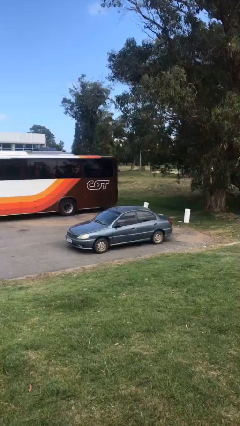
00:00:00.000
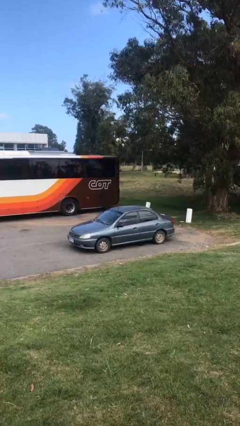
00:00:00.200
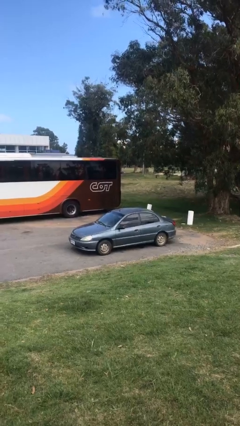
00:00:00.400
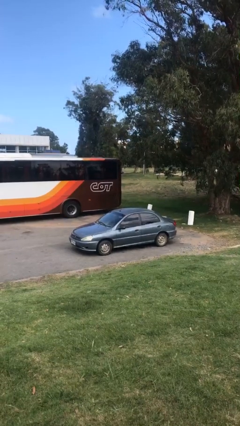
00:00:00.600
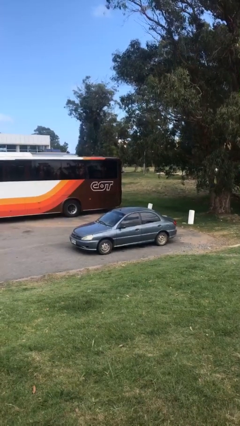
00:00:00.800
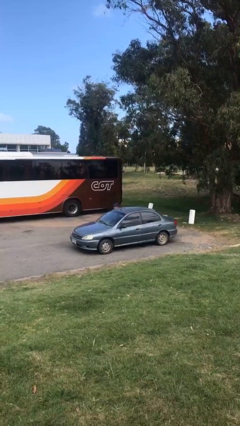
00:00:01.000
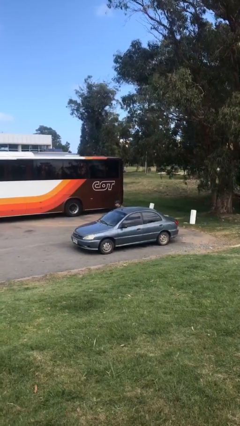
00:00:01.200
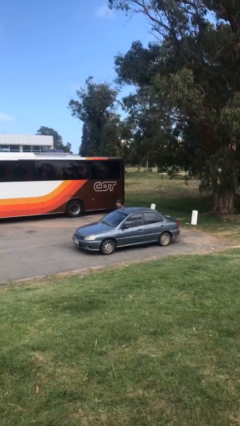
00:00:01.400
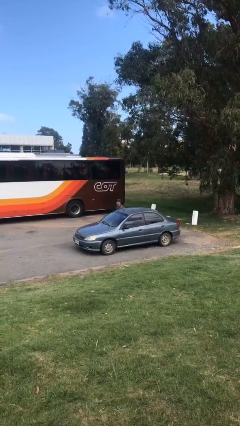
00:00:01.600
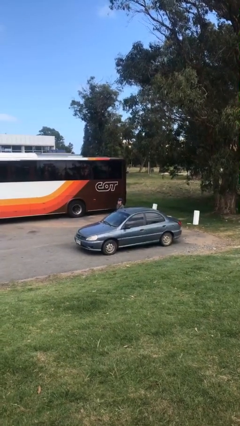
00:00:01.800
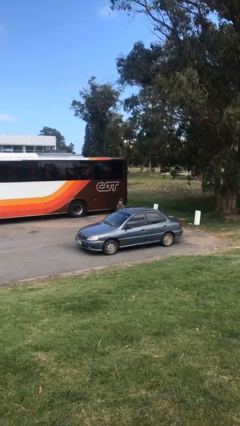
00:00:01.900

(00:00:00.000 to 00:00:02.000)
person exits car

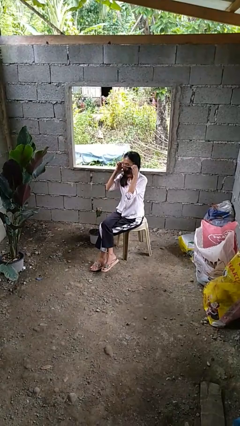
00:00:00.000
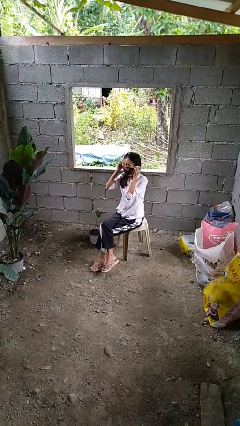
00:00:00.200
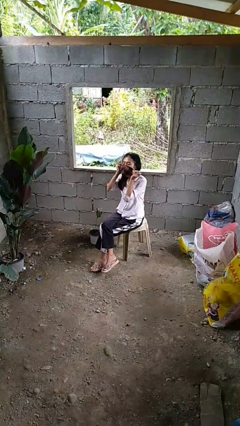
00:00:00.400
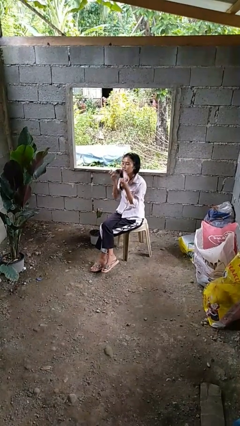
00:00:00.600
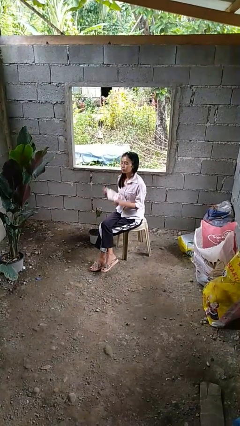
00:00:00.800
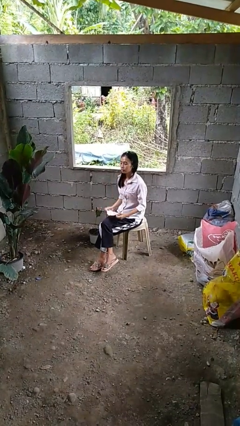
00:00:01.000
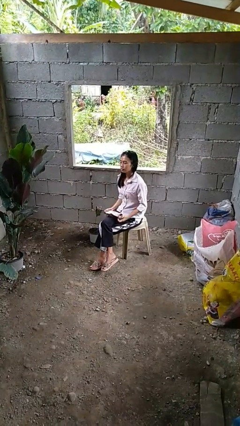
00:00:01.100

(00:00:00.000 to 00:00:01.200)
person takes off facemask

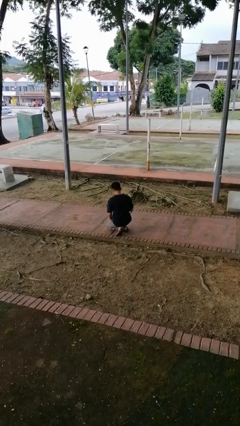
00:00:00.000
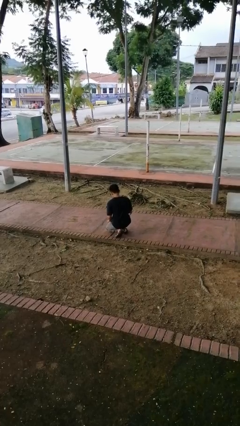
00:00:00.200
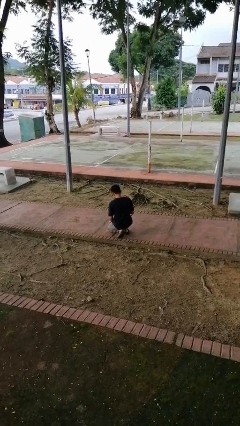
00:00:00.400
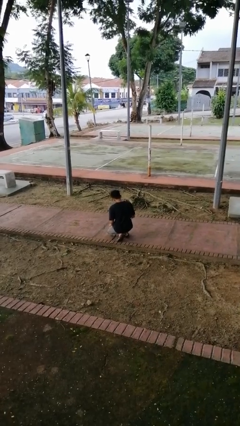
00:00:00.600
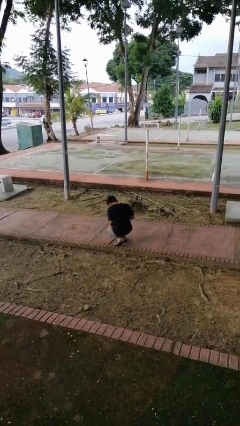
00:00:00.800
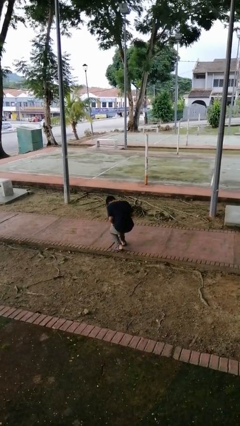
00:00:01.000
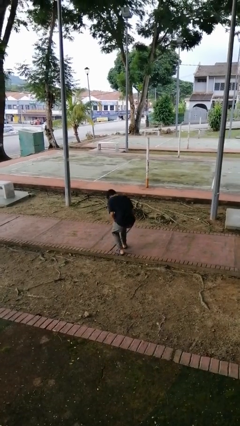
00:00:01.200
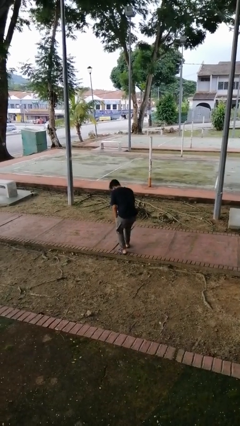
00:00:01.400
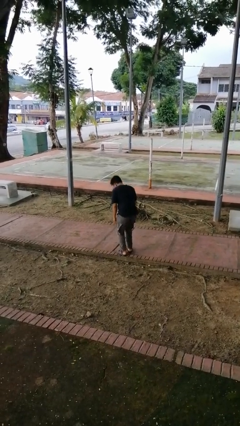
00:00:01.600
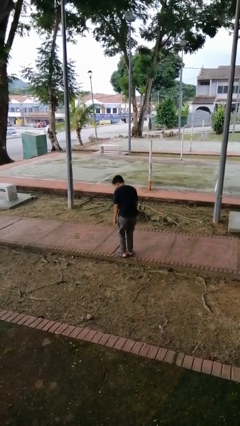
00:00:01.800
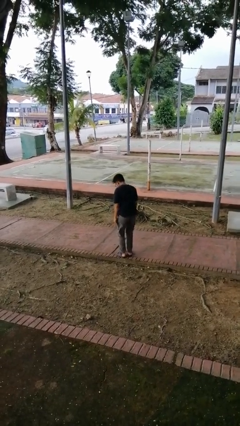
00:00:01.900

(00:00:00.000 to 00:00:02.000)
person stands up from floor

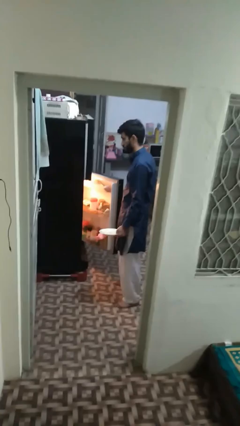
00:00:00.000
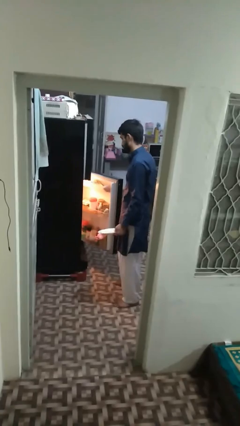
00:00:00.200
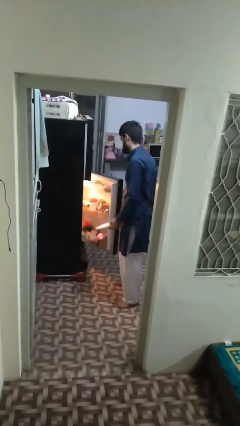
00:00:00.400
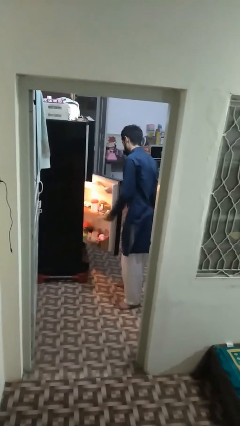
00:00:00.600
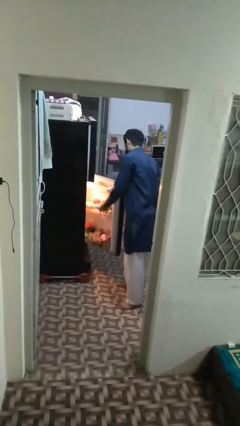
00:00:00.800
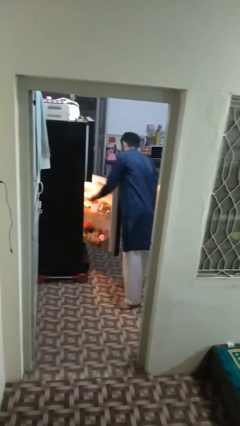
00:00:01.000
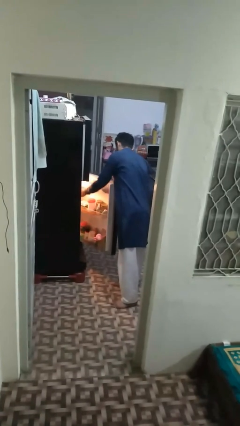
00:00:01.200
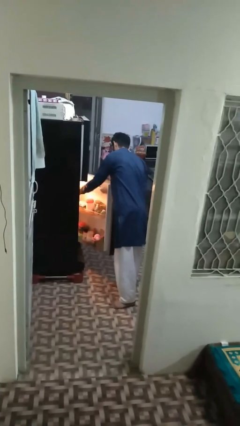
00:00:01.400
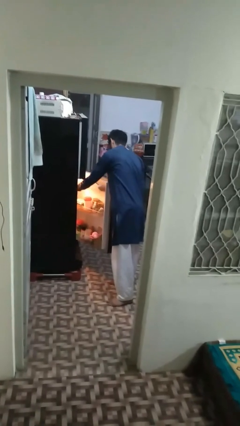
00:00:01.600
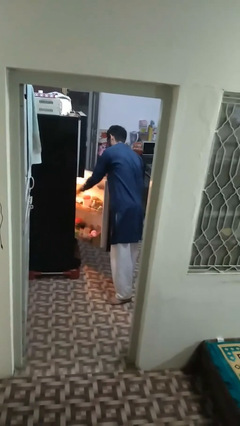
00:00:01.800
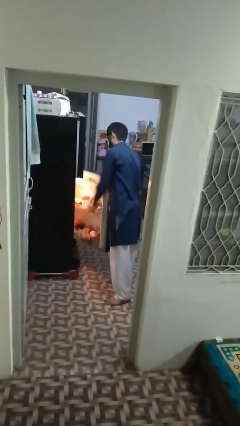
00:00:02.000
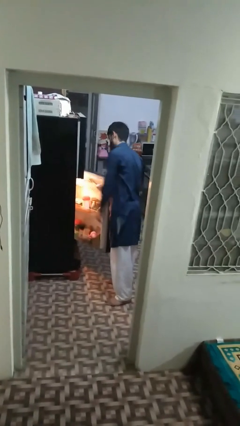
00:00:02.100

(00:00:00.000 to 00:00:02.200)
person puts object into refrigerator

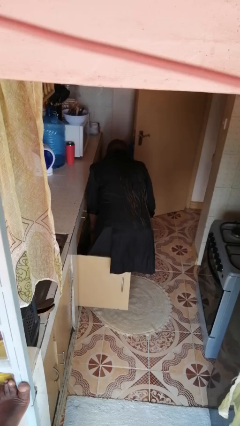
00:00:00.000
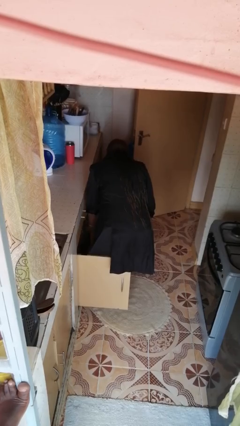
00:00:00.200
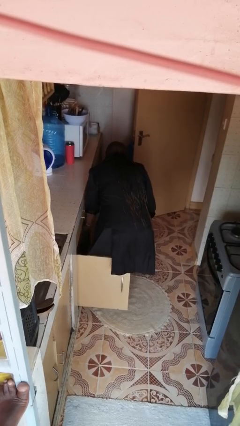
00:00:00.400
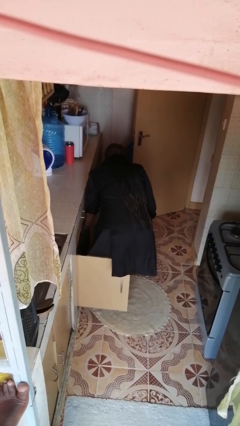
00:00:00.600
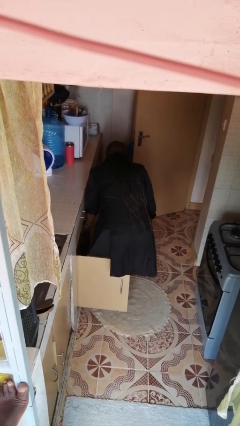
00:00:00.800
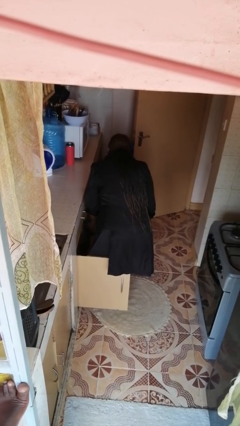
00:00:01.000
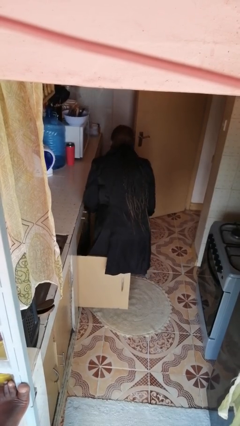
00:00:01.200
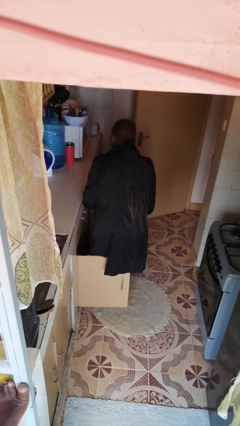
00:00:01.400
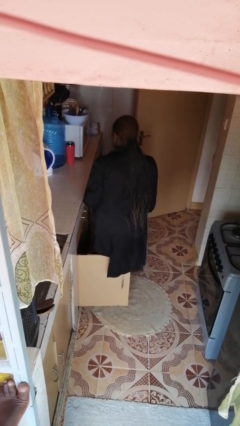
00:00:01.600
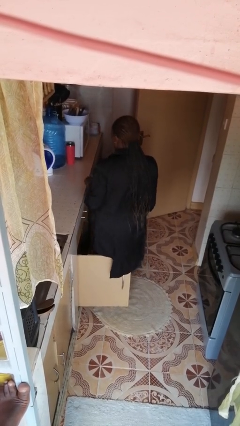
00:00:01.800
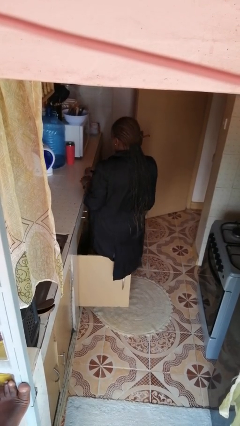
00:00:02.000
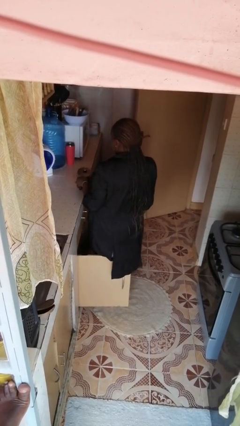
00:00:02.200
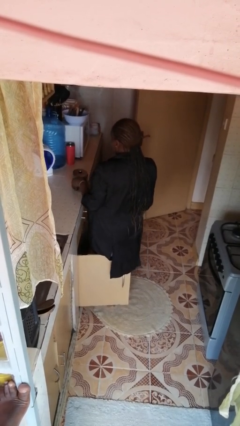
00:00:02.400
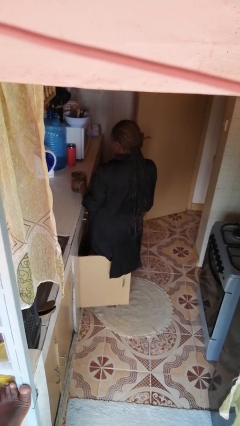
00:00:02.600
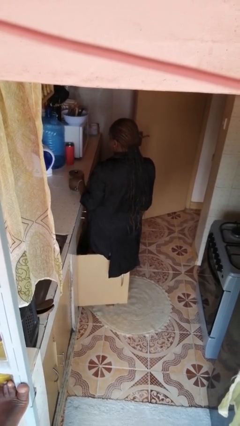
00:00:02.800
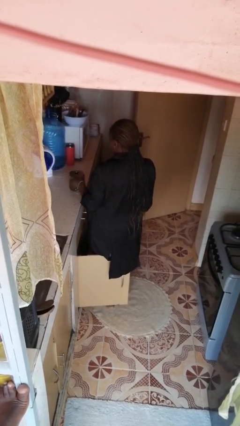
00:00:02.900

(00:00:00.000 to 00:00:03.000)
person takes object from cabinet

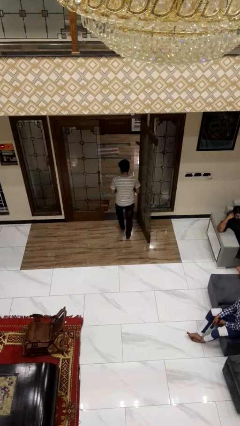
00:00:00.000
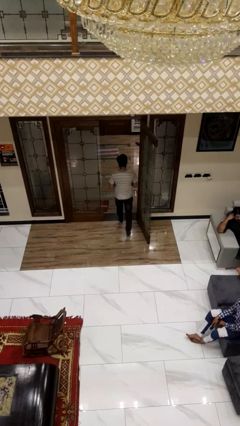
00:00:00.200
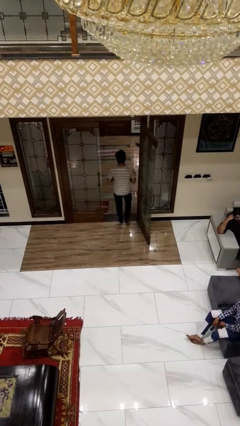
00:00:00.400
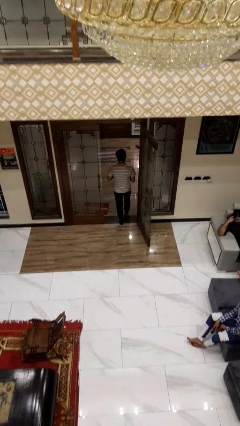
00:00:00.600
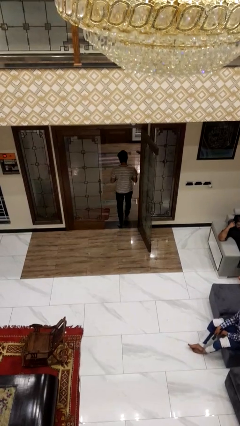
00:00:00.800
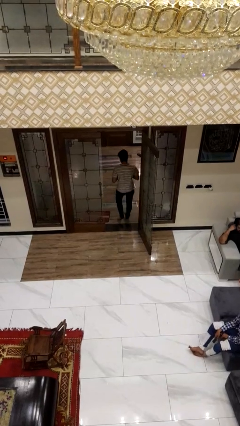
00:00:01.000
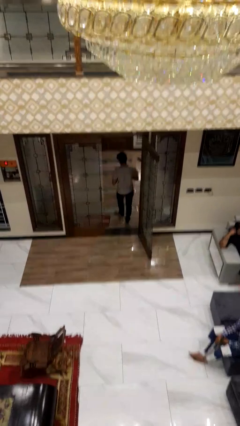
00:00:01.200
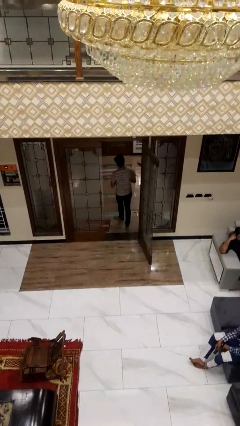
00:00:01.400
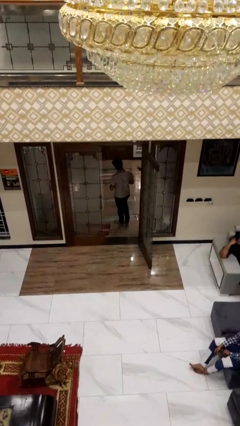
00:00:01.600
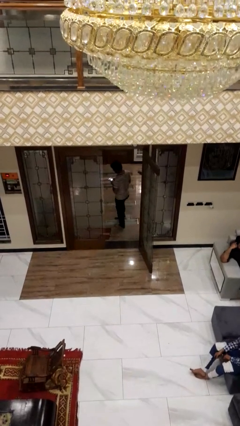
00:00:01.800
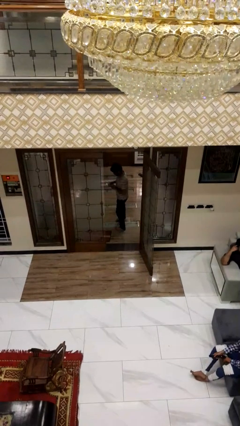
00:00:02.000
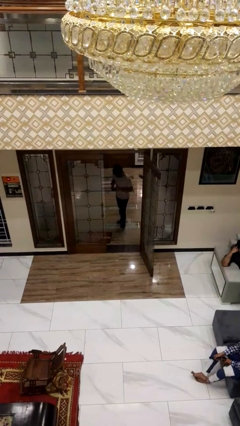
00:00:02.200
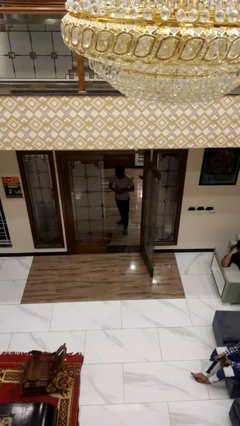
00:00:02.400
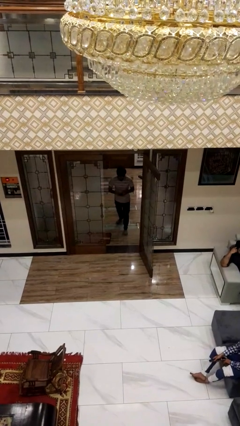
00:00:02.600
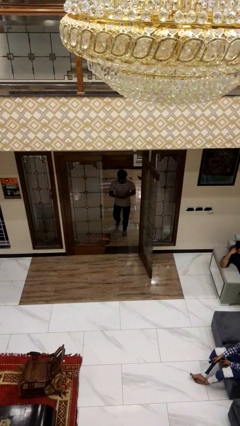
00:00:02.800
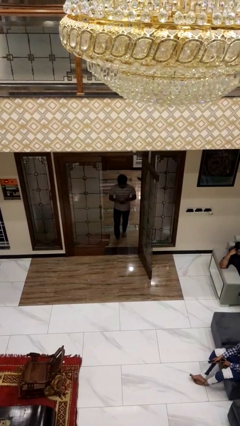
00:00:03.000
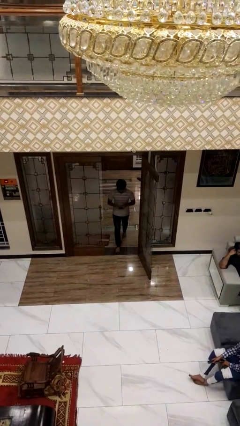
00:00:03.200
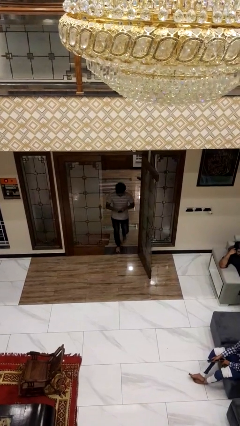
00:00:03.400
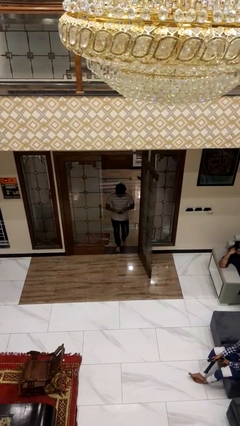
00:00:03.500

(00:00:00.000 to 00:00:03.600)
person exits scene through structure

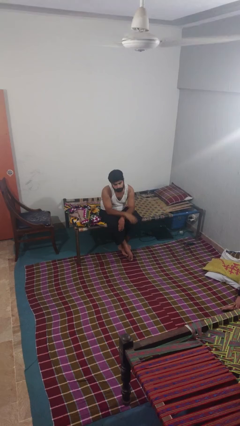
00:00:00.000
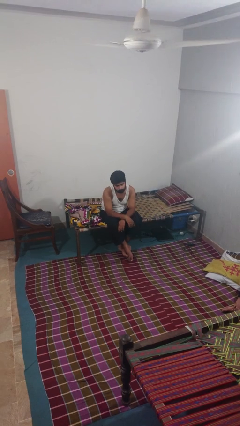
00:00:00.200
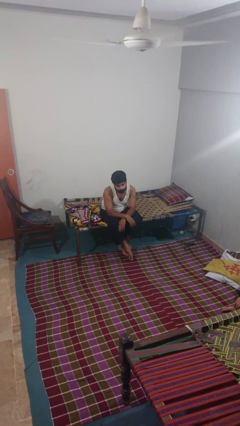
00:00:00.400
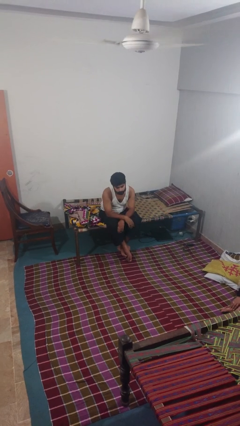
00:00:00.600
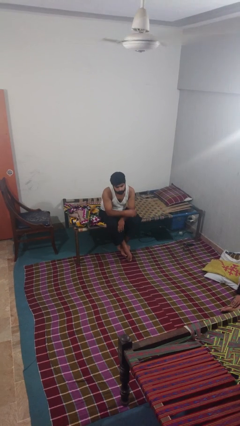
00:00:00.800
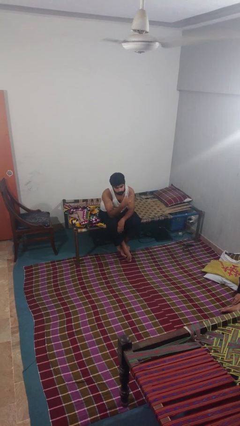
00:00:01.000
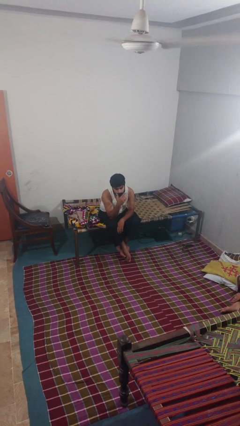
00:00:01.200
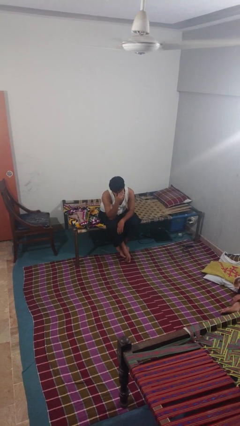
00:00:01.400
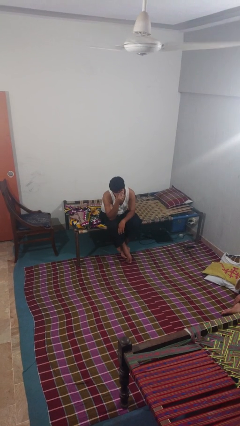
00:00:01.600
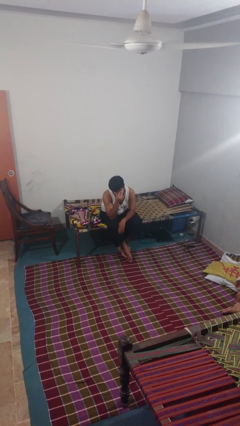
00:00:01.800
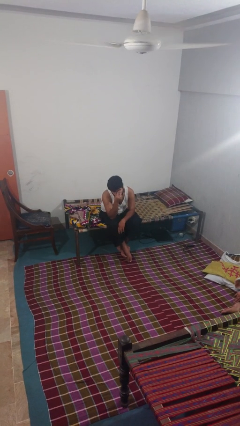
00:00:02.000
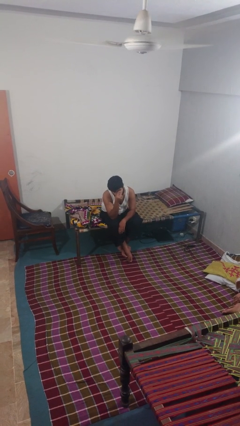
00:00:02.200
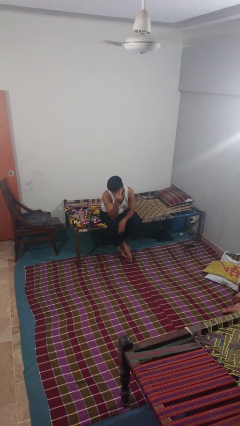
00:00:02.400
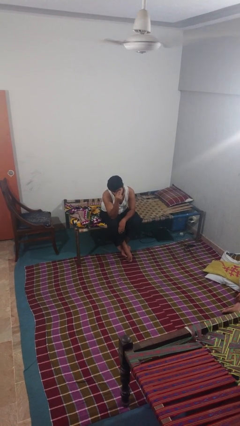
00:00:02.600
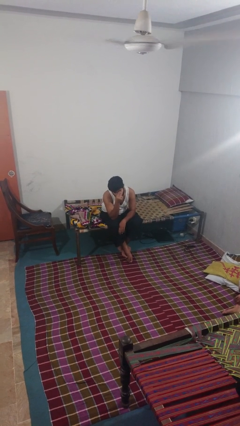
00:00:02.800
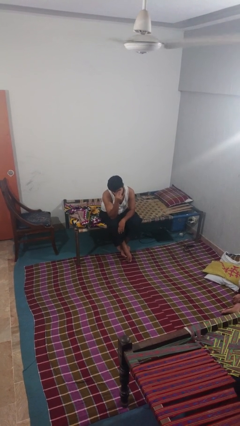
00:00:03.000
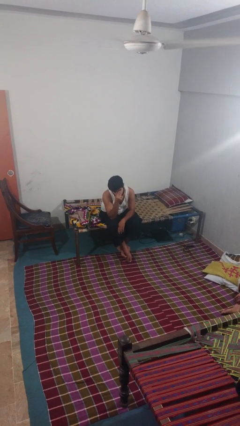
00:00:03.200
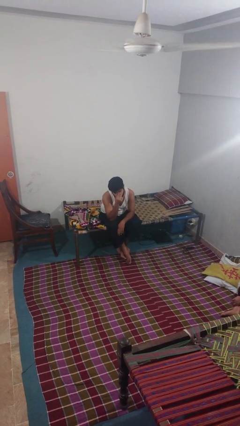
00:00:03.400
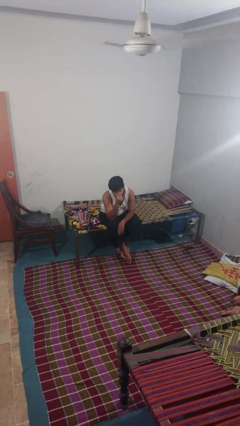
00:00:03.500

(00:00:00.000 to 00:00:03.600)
person covers face with hands
